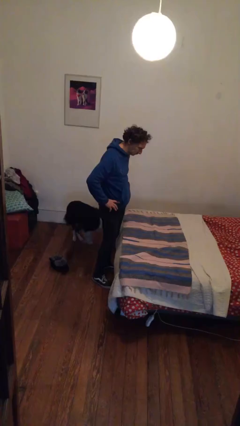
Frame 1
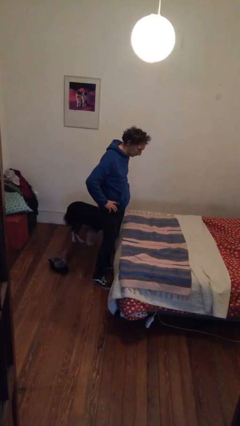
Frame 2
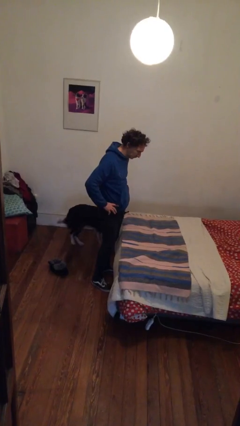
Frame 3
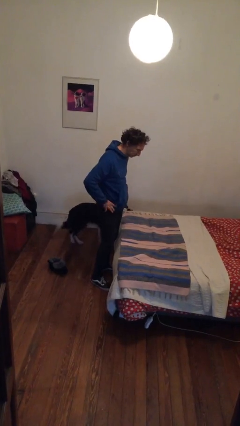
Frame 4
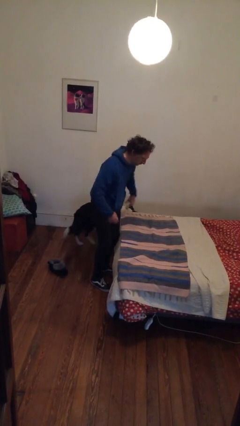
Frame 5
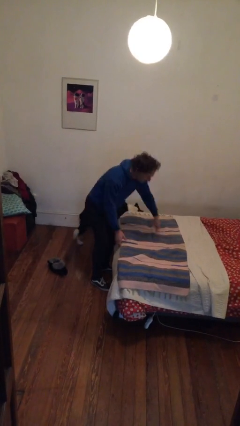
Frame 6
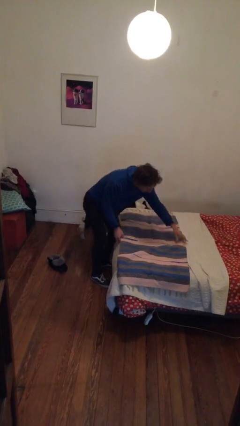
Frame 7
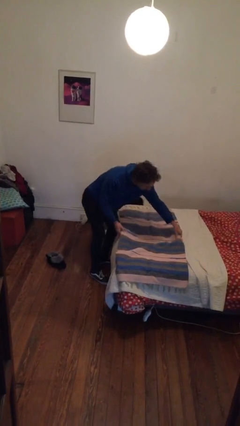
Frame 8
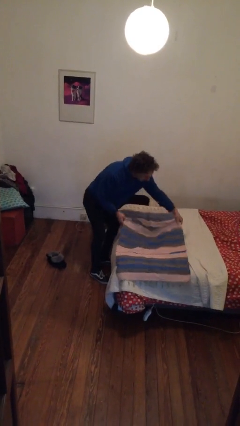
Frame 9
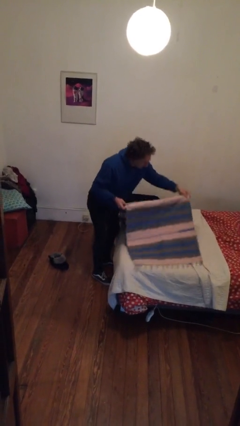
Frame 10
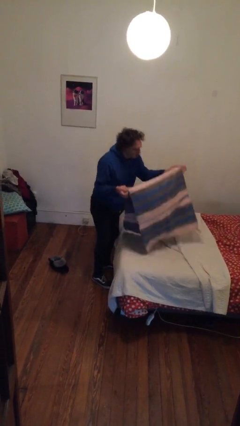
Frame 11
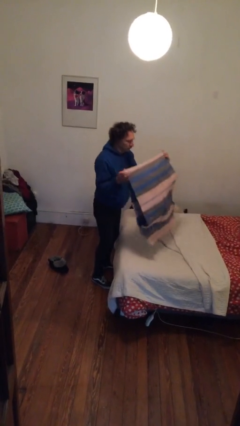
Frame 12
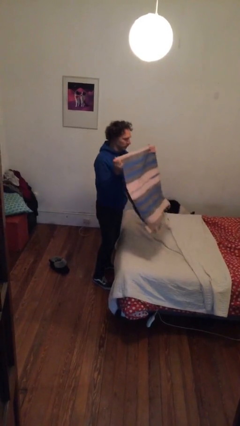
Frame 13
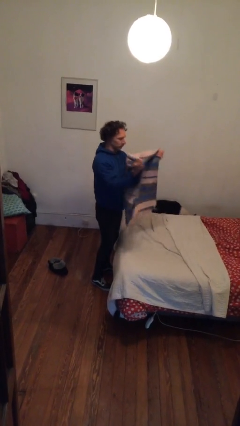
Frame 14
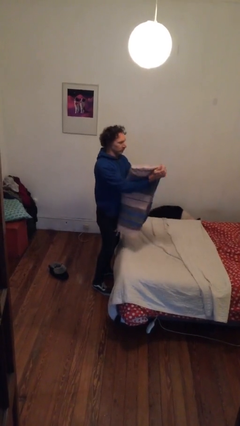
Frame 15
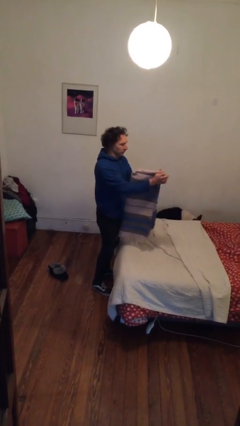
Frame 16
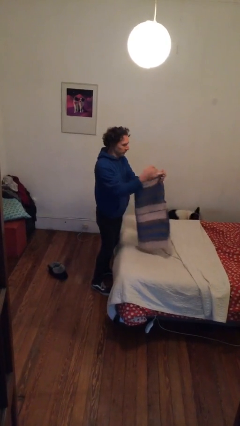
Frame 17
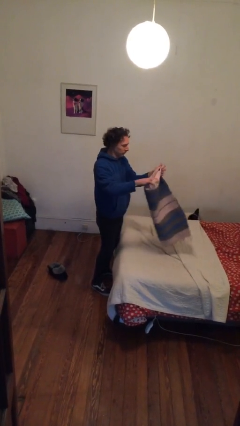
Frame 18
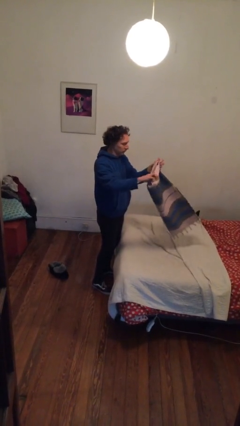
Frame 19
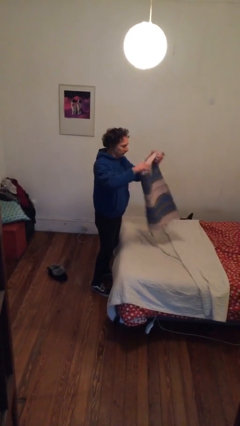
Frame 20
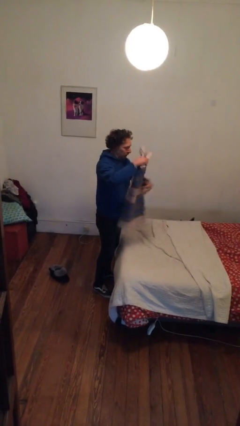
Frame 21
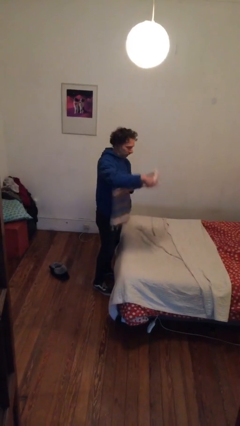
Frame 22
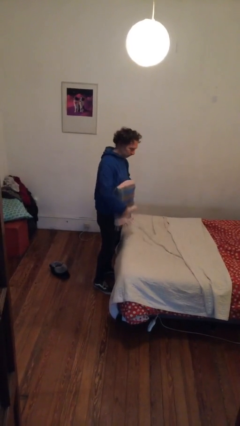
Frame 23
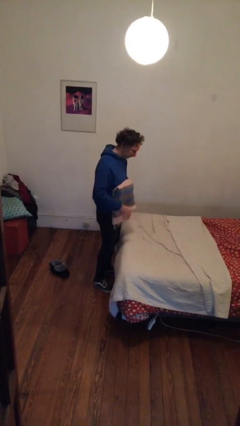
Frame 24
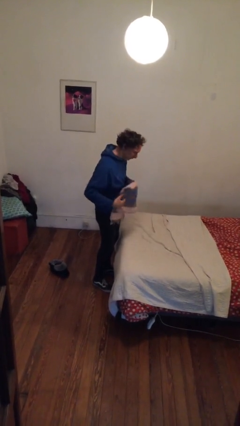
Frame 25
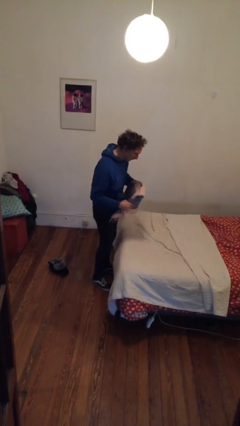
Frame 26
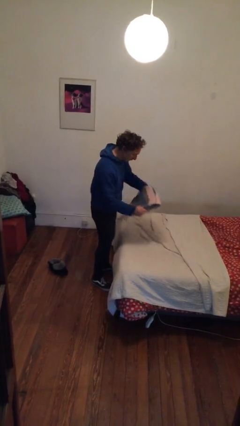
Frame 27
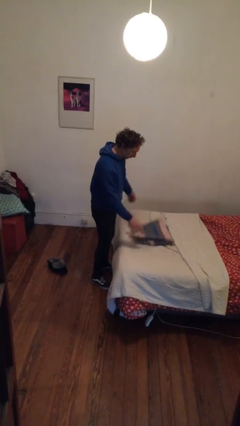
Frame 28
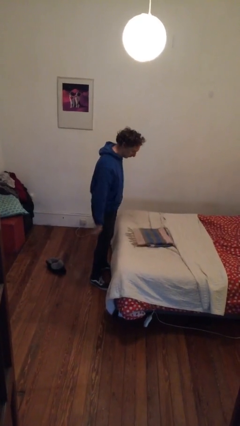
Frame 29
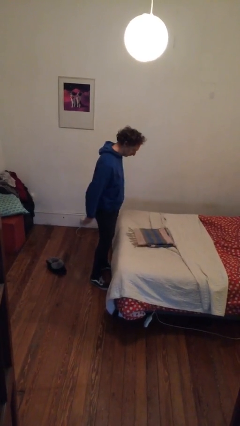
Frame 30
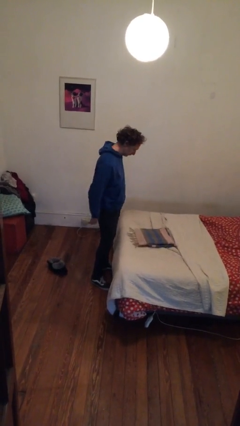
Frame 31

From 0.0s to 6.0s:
person folds blanket

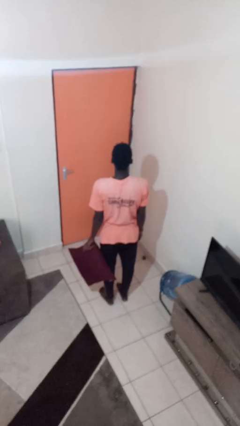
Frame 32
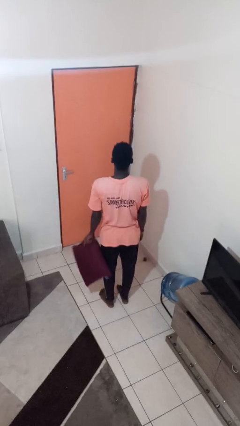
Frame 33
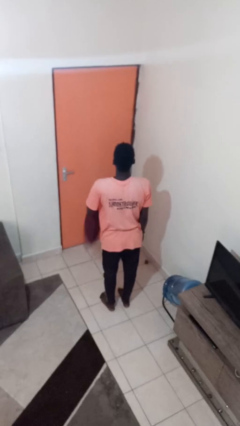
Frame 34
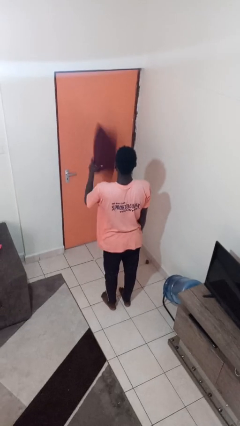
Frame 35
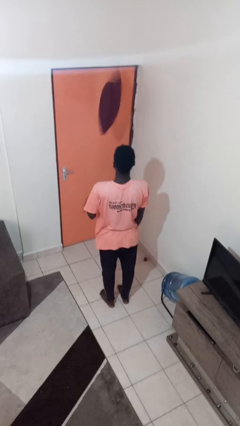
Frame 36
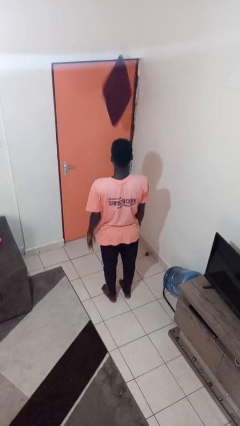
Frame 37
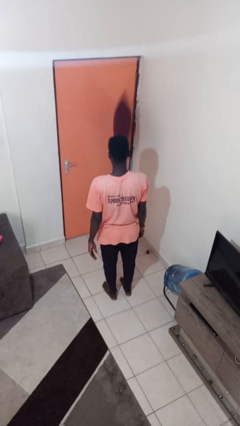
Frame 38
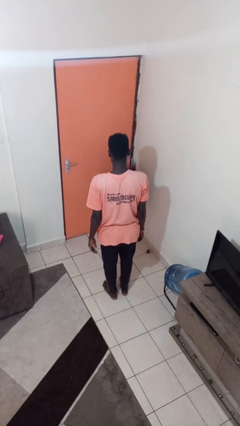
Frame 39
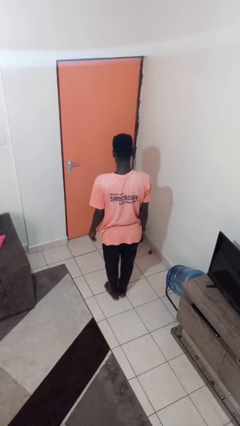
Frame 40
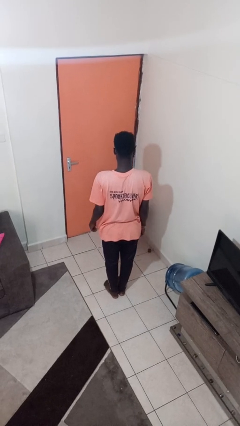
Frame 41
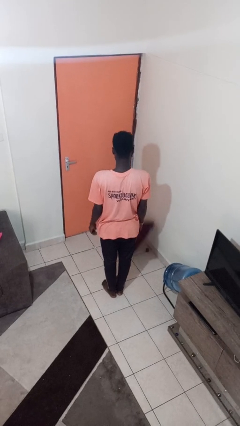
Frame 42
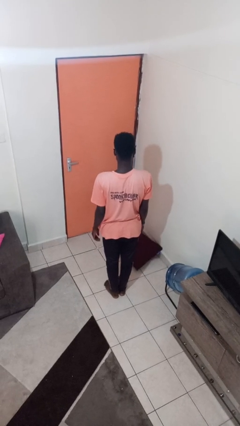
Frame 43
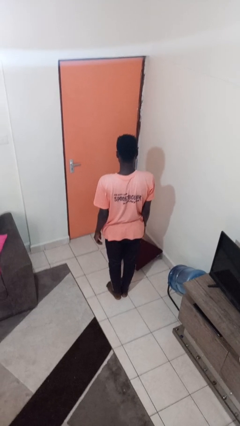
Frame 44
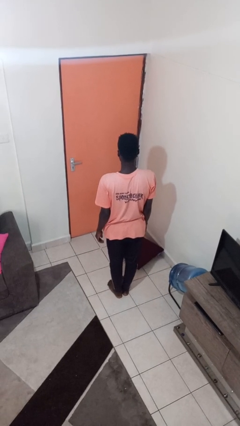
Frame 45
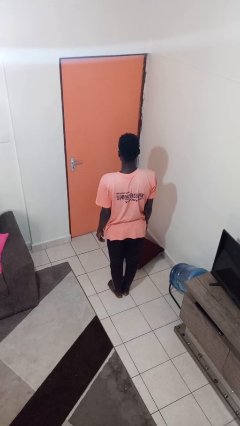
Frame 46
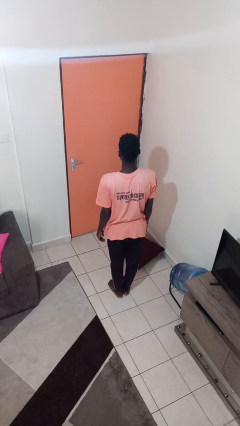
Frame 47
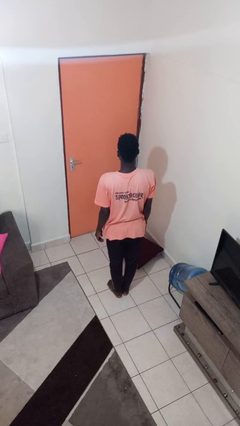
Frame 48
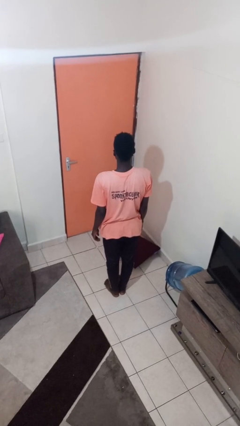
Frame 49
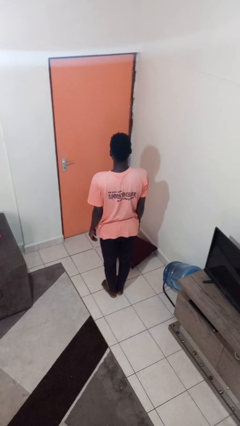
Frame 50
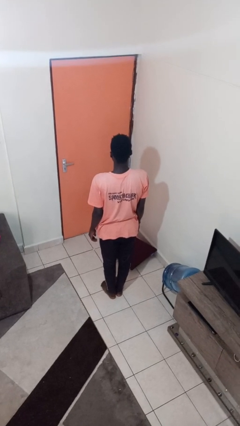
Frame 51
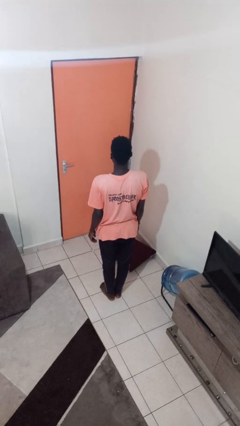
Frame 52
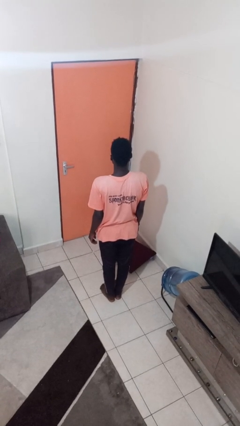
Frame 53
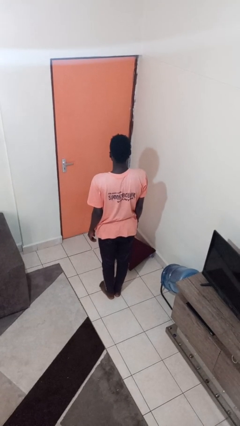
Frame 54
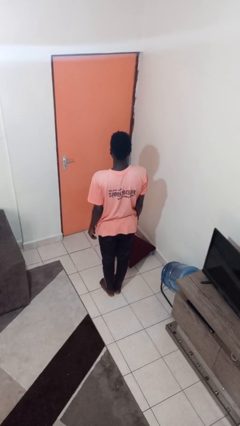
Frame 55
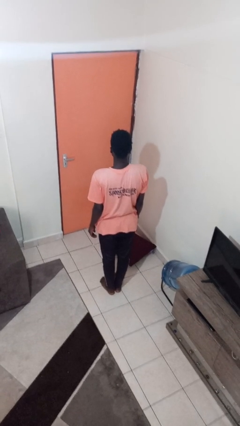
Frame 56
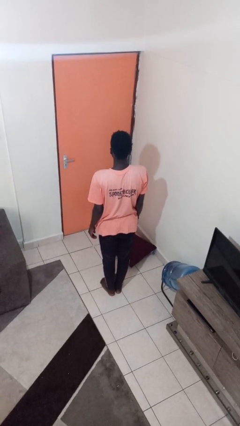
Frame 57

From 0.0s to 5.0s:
person throws object into air

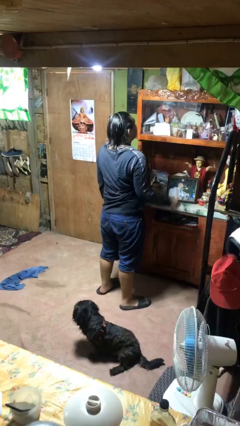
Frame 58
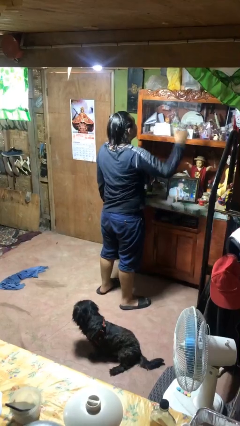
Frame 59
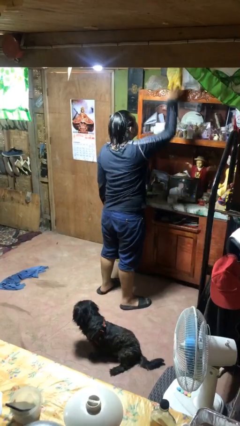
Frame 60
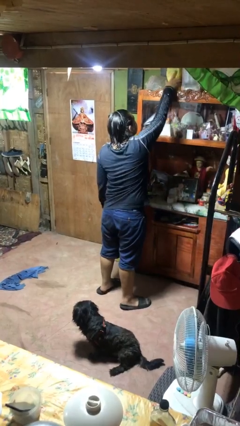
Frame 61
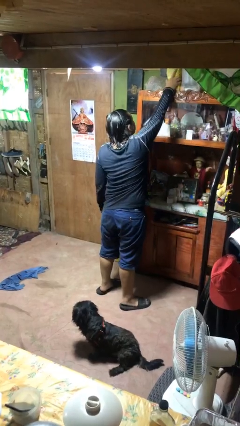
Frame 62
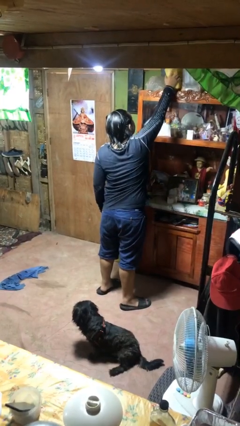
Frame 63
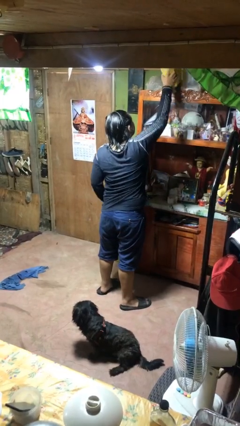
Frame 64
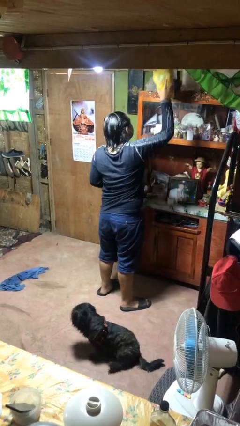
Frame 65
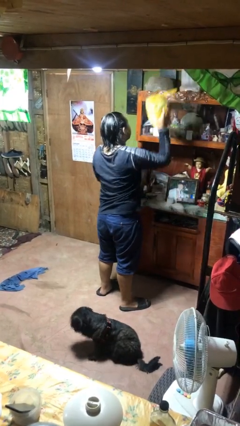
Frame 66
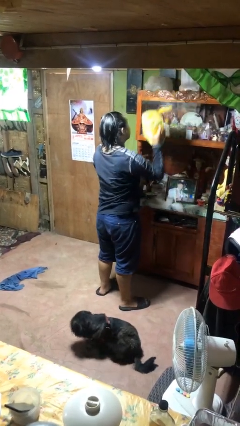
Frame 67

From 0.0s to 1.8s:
person picks up object from shelf

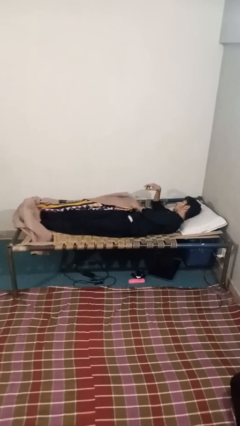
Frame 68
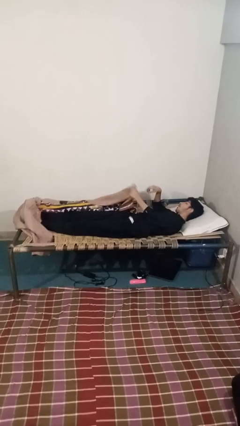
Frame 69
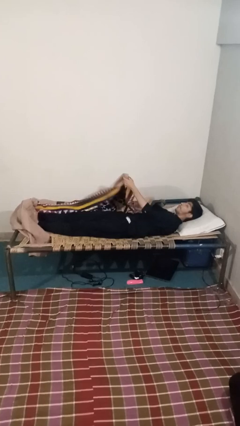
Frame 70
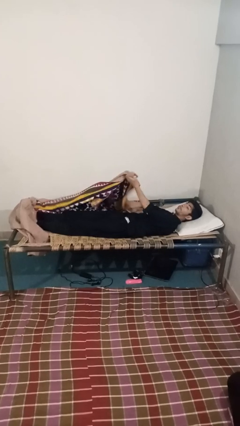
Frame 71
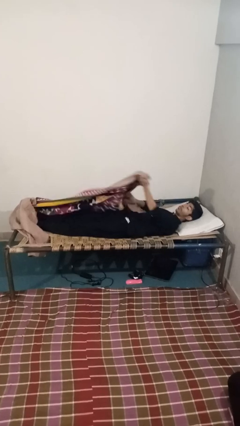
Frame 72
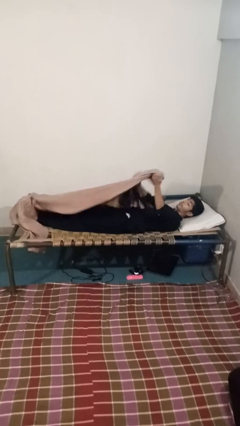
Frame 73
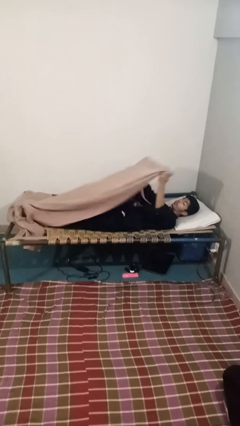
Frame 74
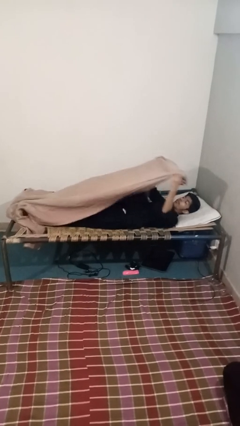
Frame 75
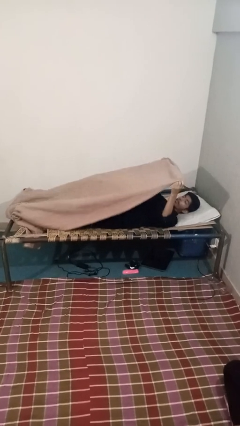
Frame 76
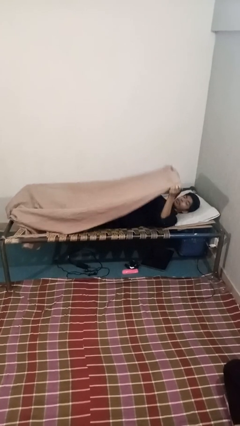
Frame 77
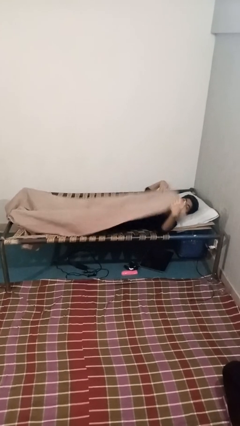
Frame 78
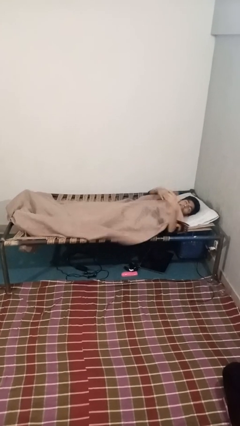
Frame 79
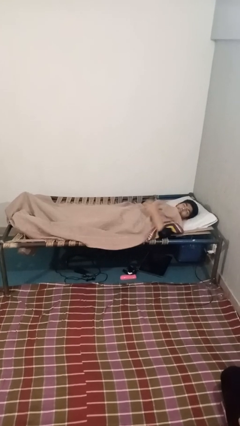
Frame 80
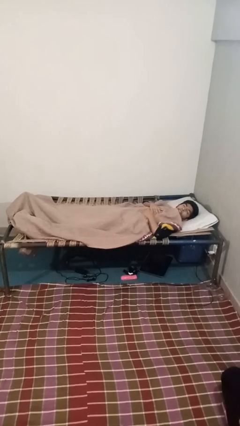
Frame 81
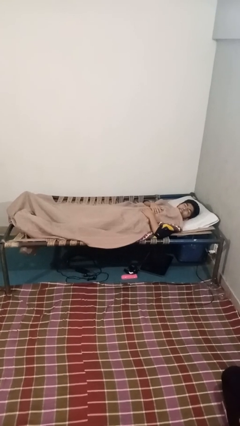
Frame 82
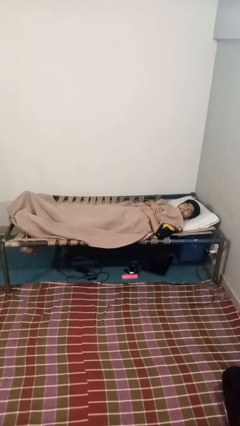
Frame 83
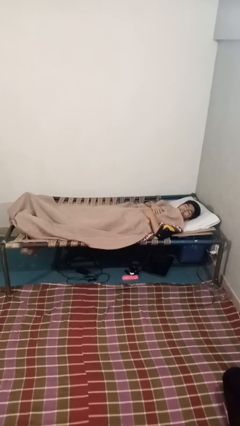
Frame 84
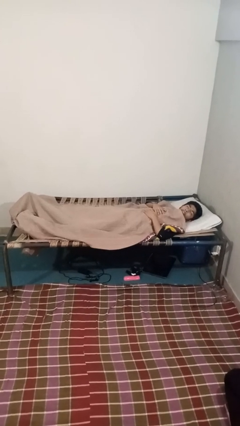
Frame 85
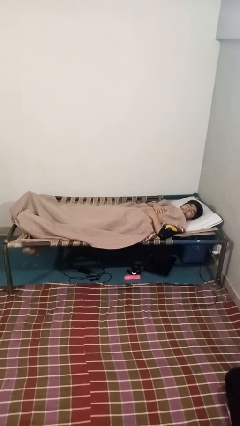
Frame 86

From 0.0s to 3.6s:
person covers with blanket

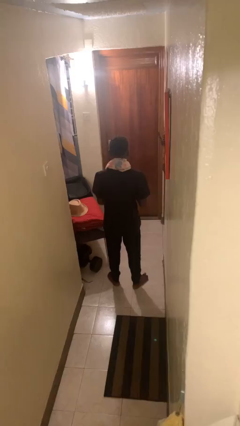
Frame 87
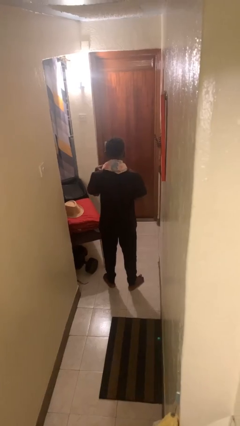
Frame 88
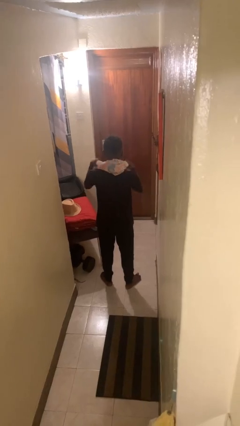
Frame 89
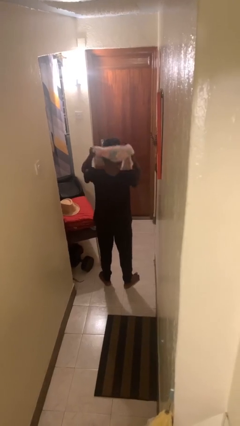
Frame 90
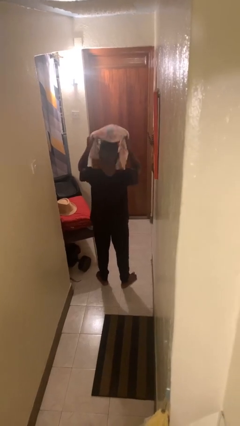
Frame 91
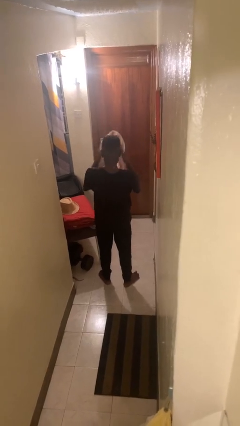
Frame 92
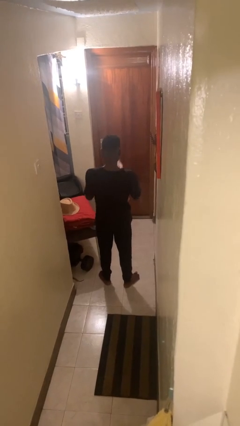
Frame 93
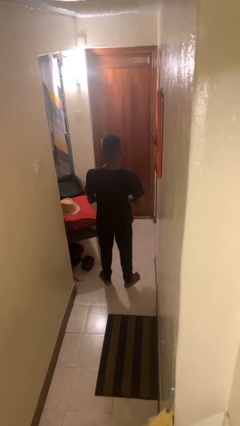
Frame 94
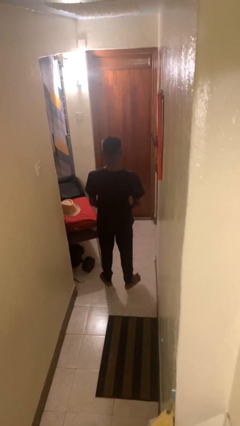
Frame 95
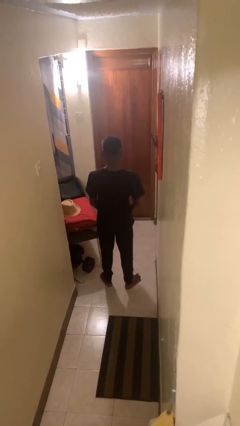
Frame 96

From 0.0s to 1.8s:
person takes off scarf
